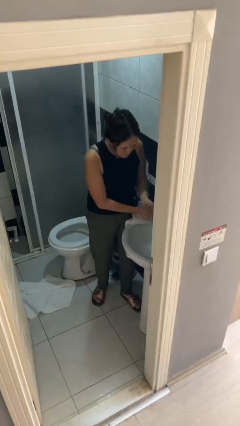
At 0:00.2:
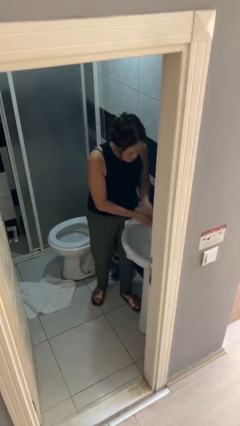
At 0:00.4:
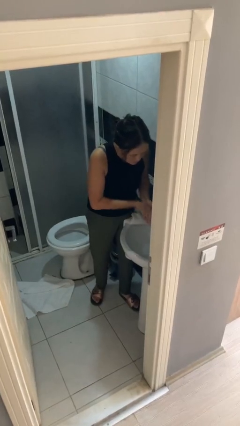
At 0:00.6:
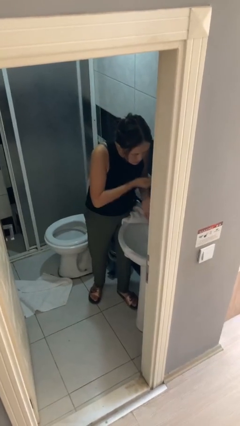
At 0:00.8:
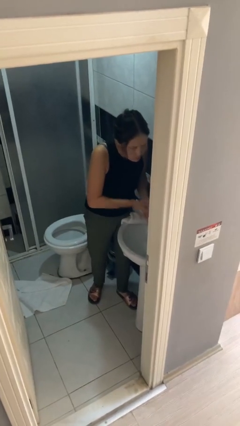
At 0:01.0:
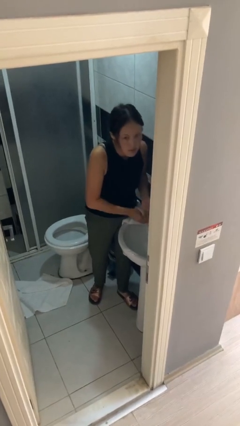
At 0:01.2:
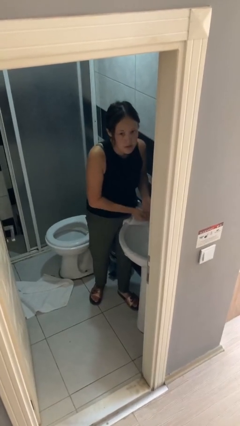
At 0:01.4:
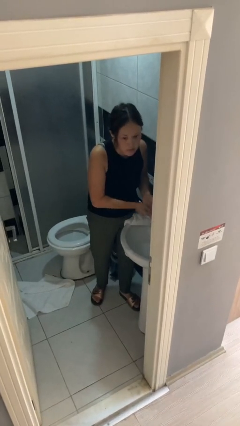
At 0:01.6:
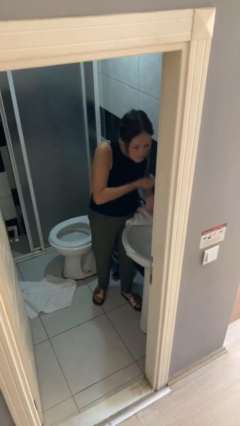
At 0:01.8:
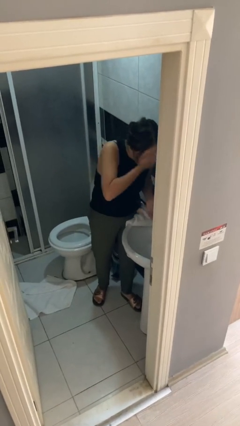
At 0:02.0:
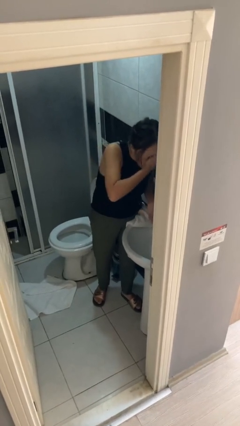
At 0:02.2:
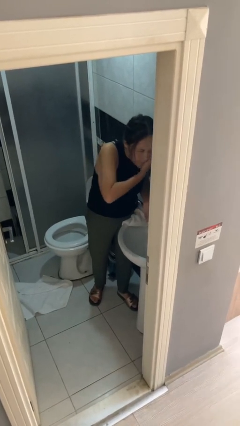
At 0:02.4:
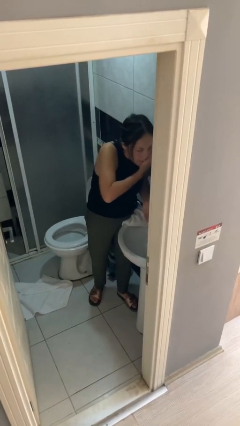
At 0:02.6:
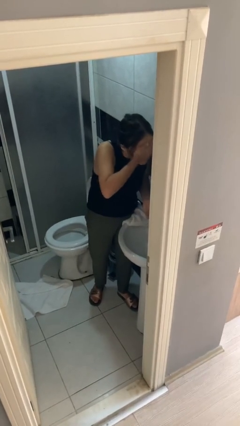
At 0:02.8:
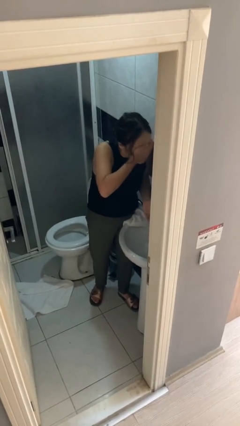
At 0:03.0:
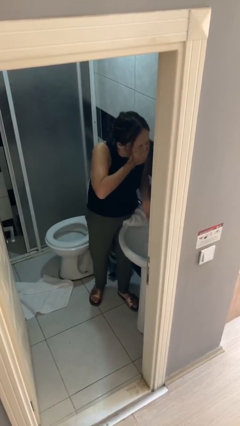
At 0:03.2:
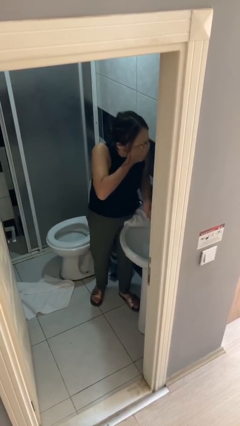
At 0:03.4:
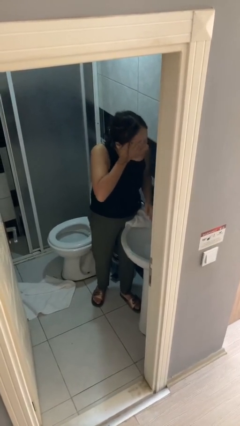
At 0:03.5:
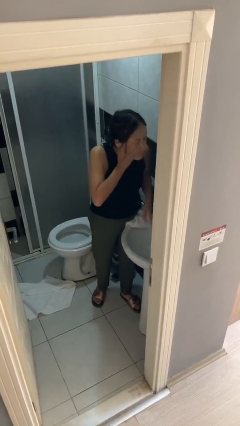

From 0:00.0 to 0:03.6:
person washes face

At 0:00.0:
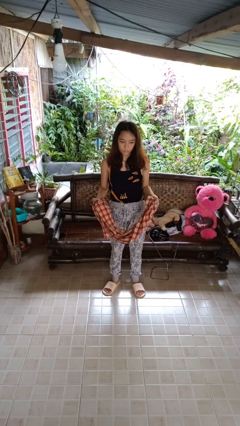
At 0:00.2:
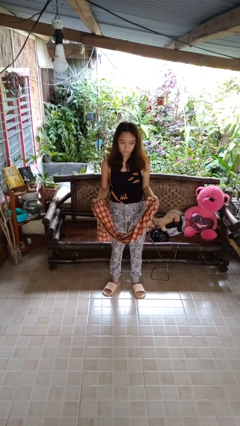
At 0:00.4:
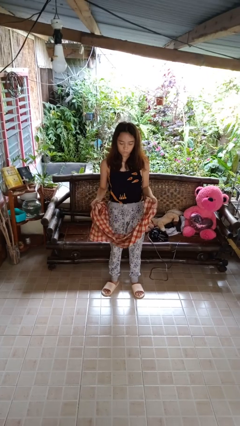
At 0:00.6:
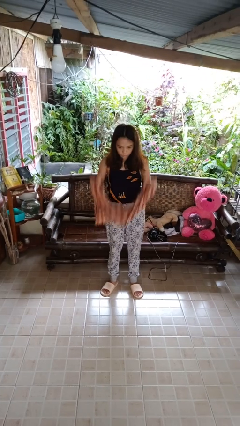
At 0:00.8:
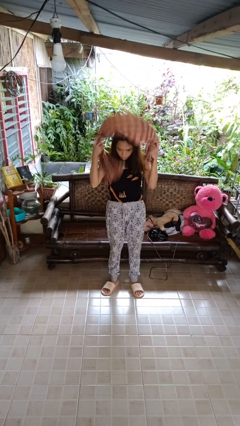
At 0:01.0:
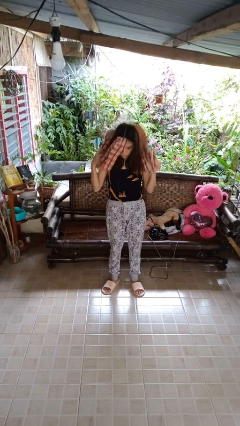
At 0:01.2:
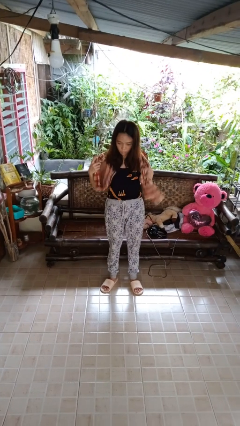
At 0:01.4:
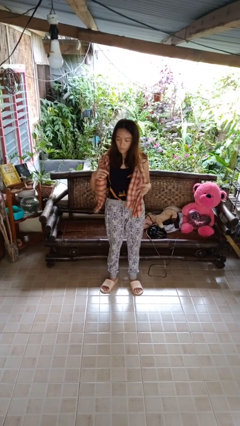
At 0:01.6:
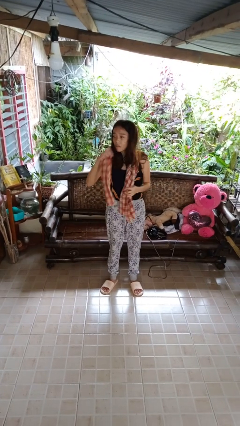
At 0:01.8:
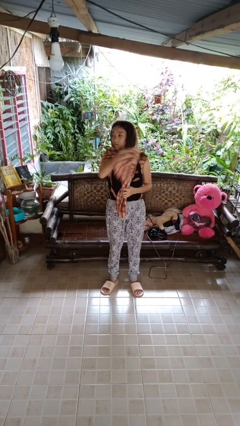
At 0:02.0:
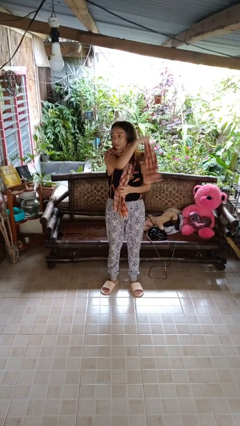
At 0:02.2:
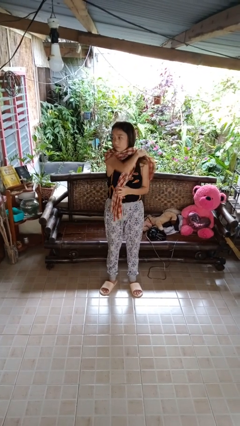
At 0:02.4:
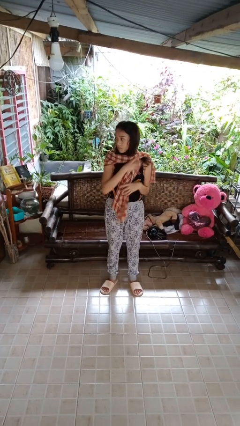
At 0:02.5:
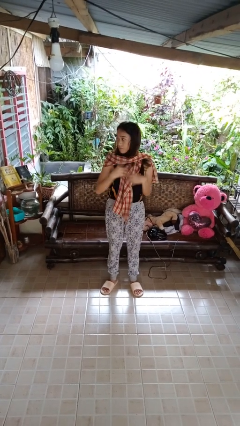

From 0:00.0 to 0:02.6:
person puts on scarf

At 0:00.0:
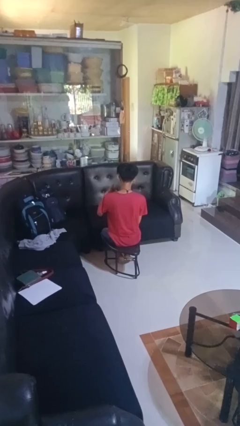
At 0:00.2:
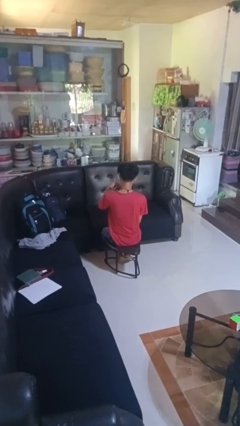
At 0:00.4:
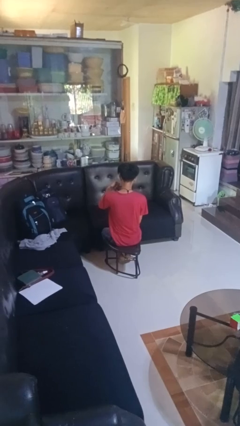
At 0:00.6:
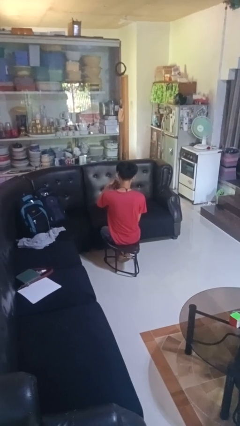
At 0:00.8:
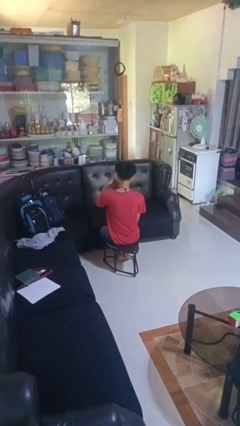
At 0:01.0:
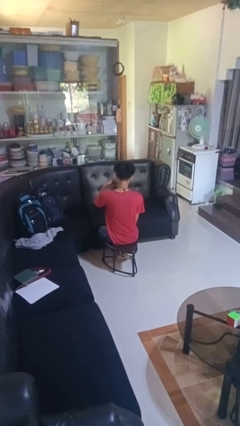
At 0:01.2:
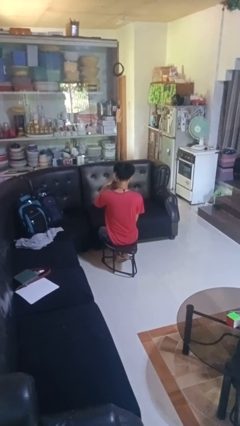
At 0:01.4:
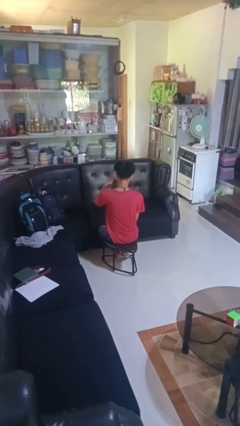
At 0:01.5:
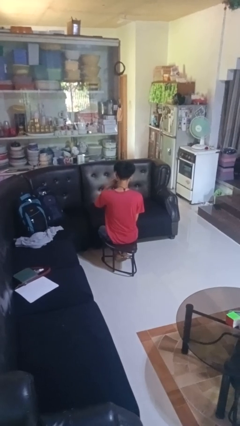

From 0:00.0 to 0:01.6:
person gestures call me

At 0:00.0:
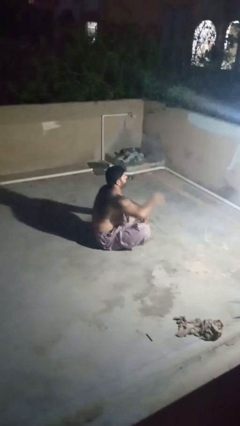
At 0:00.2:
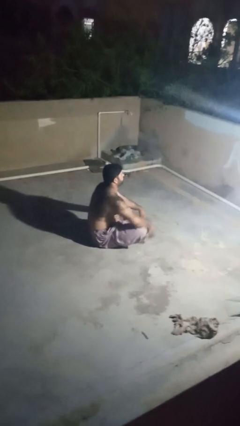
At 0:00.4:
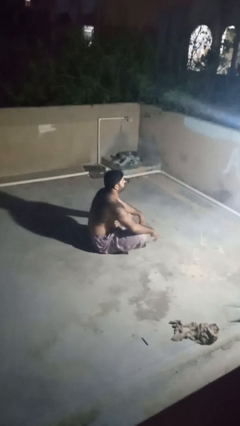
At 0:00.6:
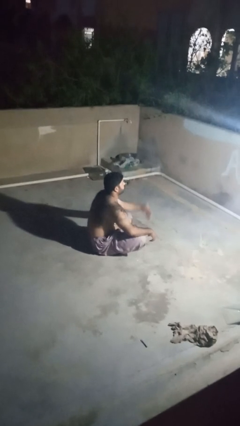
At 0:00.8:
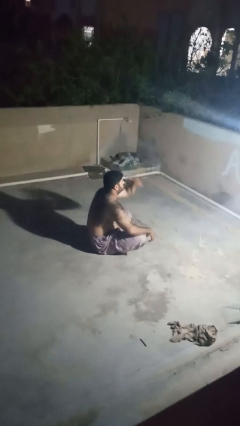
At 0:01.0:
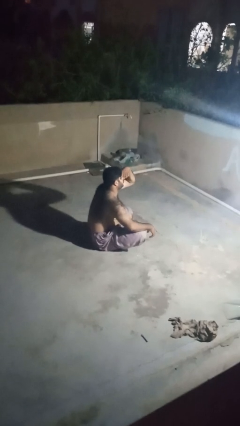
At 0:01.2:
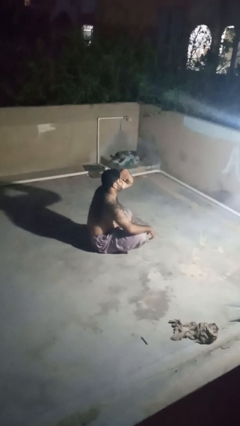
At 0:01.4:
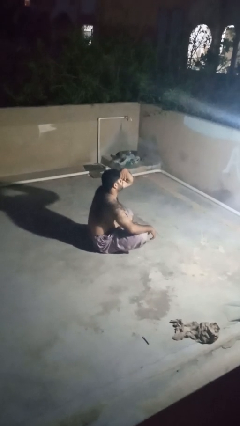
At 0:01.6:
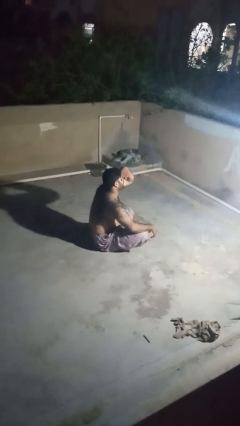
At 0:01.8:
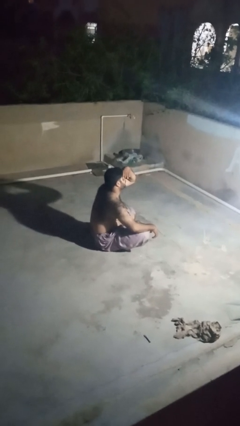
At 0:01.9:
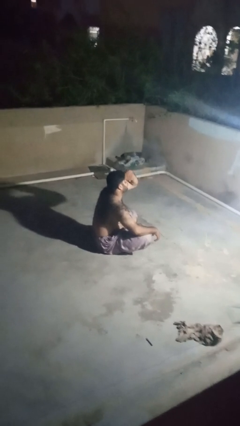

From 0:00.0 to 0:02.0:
person shades eyes

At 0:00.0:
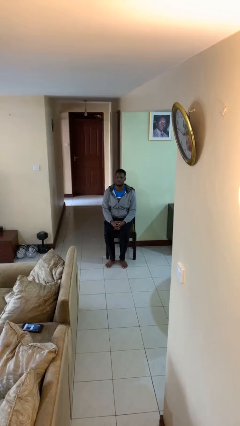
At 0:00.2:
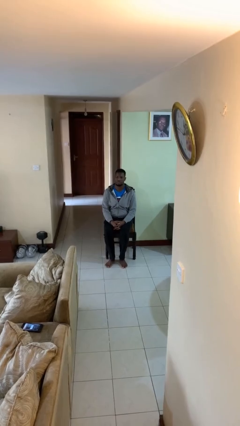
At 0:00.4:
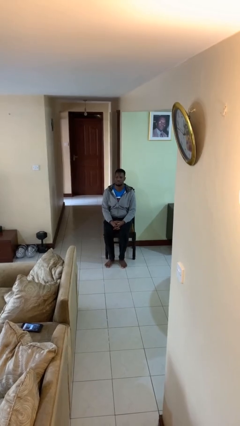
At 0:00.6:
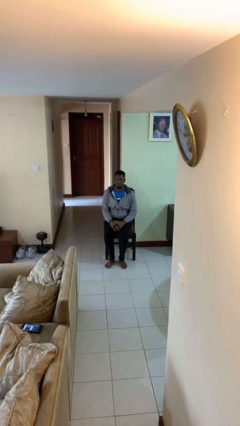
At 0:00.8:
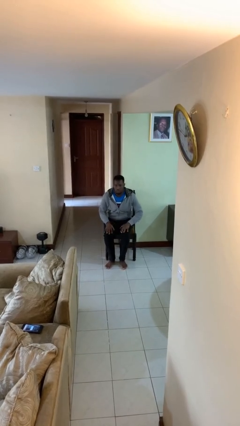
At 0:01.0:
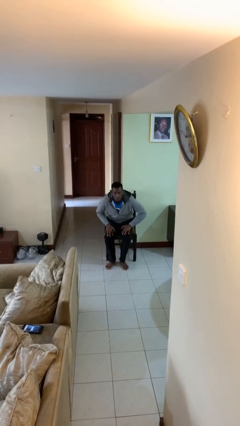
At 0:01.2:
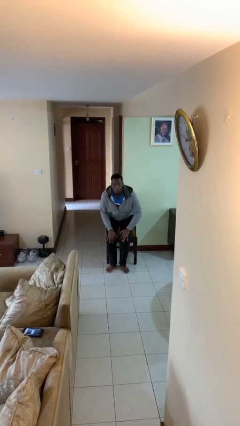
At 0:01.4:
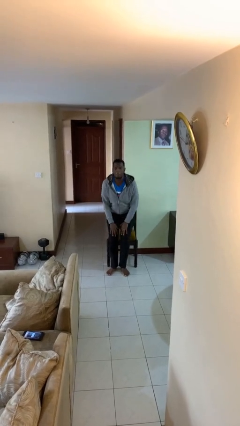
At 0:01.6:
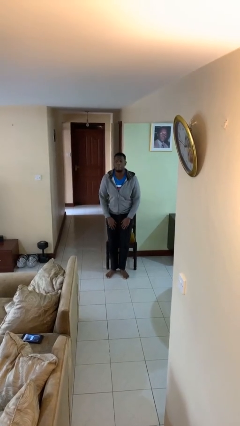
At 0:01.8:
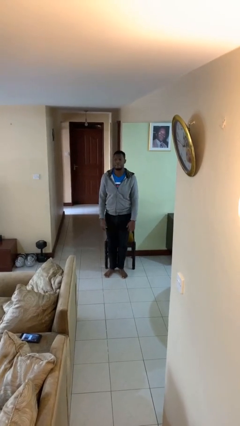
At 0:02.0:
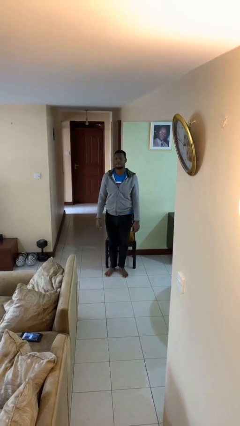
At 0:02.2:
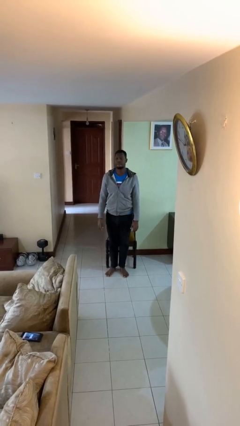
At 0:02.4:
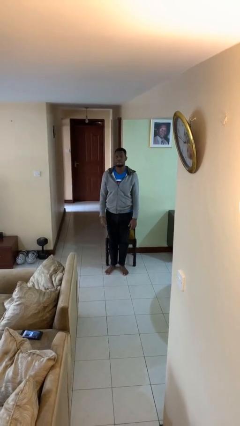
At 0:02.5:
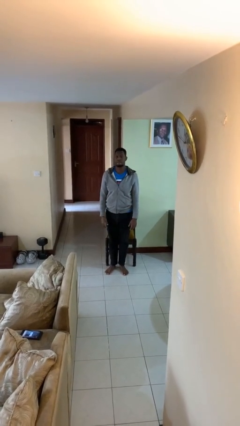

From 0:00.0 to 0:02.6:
person stands up

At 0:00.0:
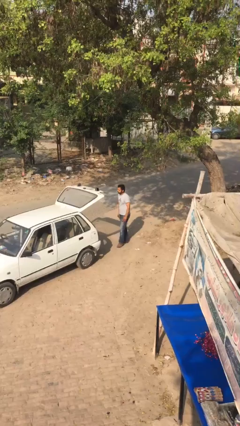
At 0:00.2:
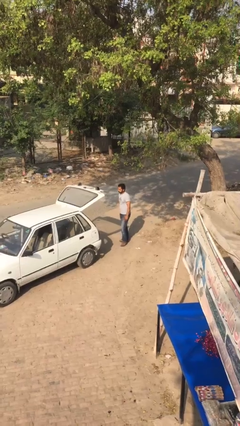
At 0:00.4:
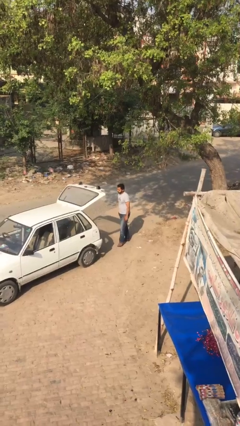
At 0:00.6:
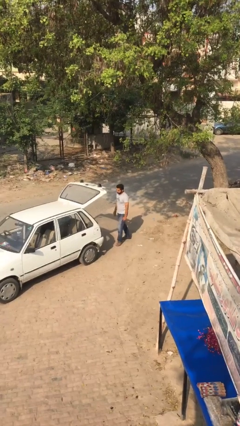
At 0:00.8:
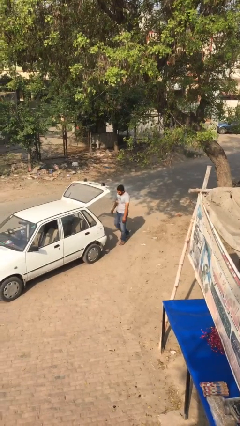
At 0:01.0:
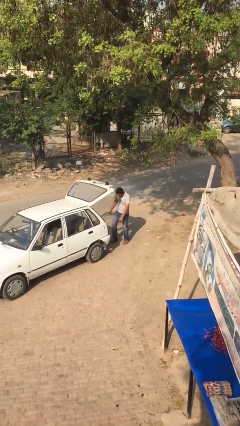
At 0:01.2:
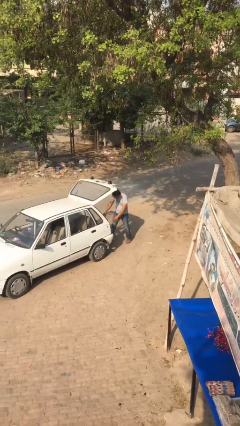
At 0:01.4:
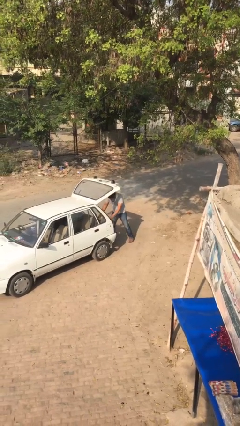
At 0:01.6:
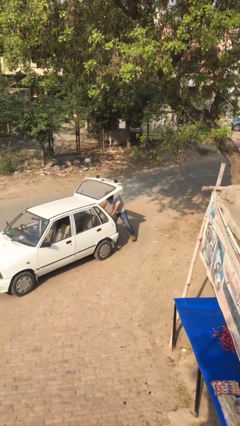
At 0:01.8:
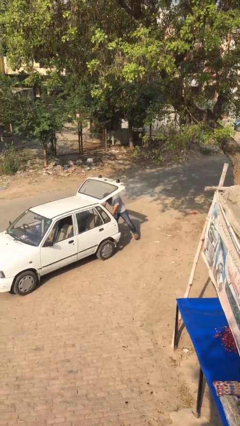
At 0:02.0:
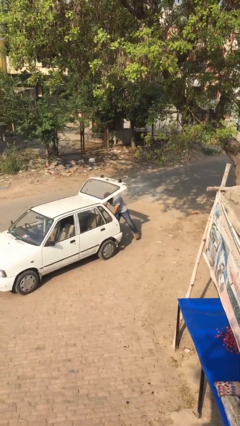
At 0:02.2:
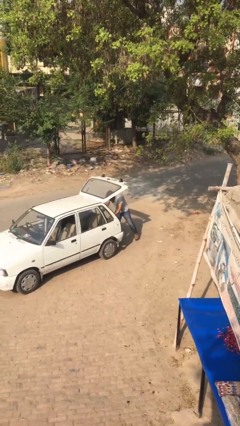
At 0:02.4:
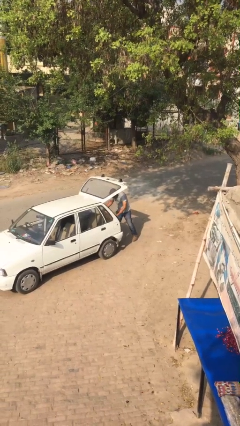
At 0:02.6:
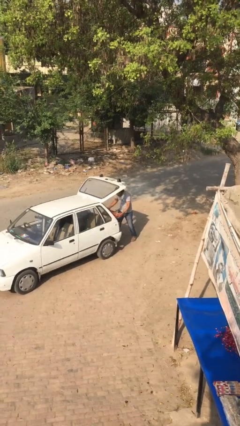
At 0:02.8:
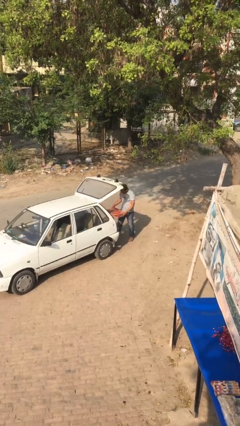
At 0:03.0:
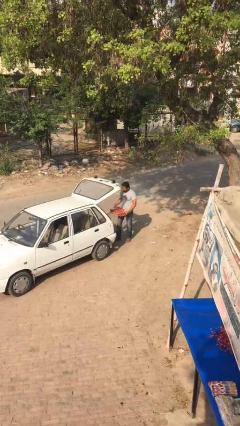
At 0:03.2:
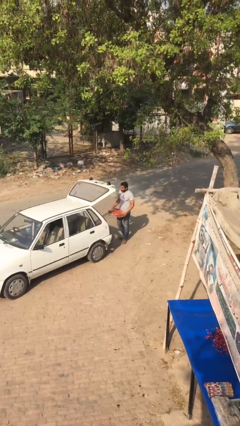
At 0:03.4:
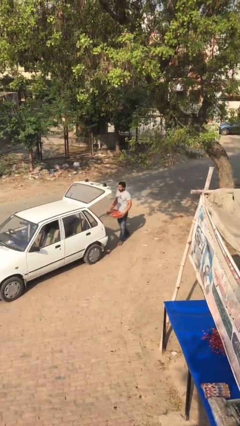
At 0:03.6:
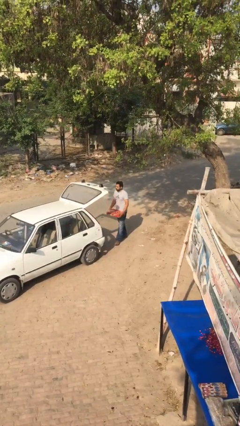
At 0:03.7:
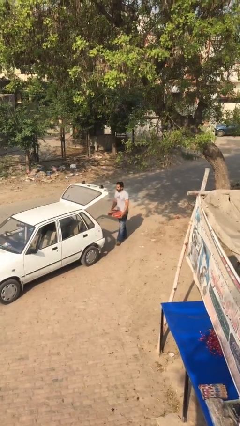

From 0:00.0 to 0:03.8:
person unloads car

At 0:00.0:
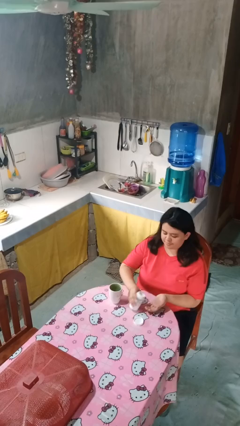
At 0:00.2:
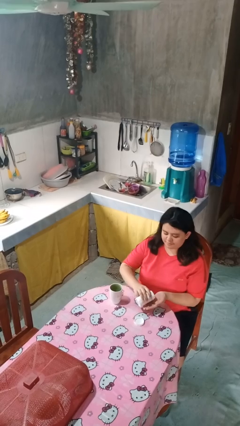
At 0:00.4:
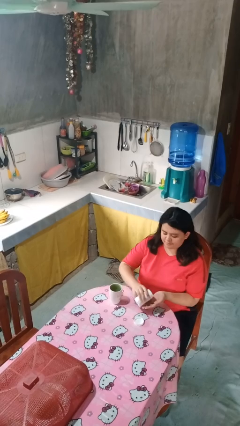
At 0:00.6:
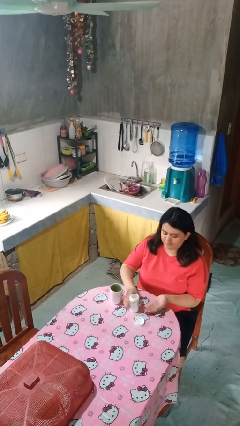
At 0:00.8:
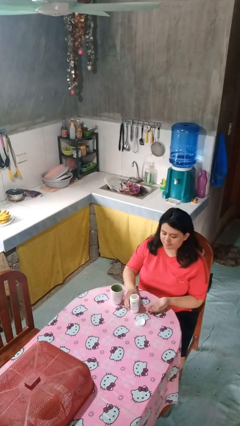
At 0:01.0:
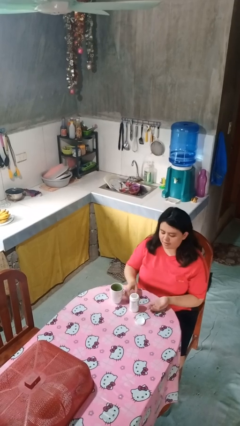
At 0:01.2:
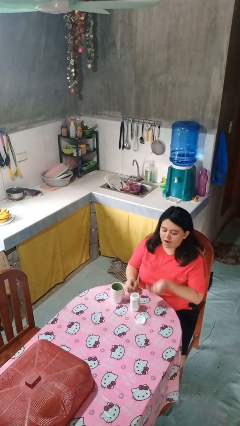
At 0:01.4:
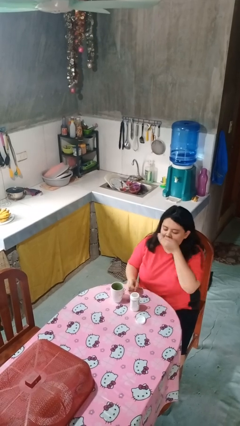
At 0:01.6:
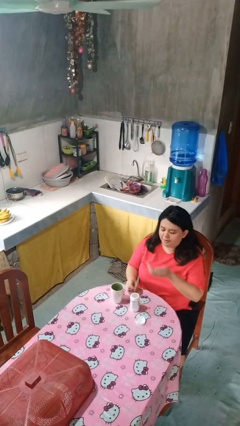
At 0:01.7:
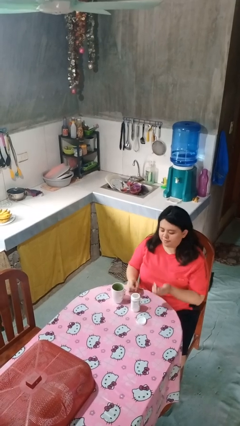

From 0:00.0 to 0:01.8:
person takes medicine pills
